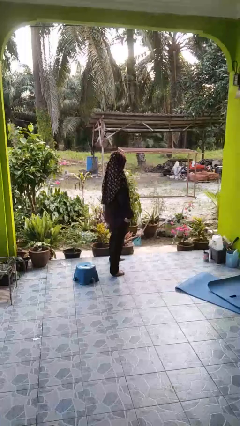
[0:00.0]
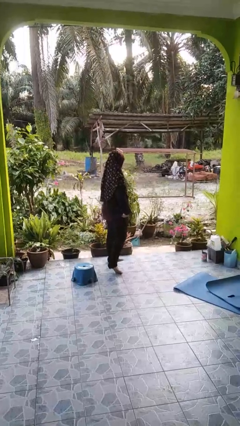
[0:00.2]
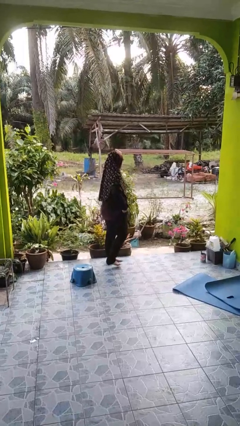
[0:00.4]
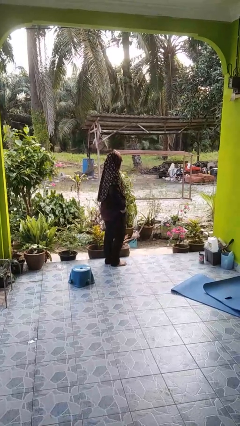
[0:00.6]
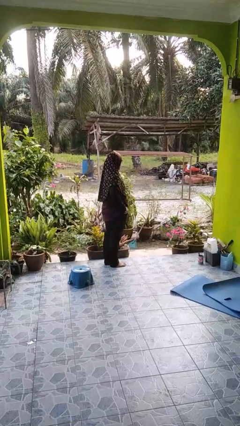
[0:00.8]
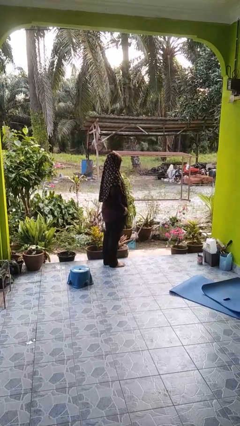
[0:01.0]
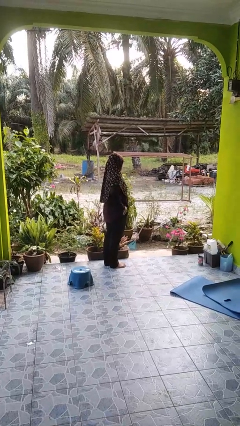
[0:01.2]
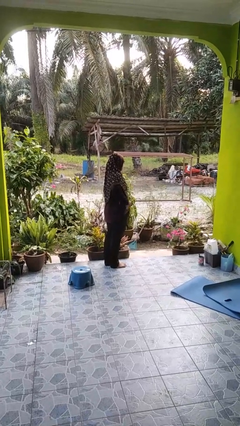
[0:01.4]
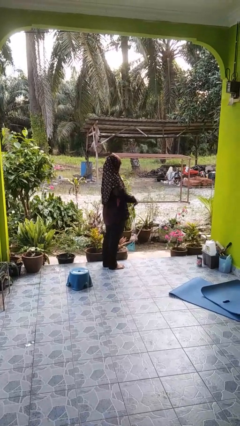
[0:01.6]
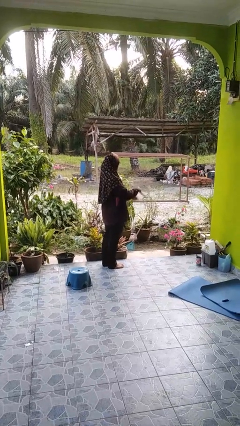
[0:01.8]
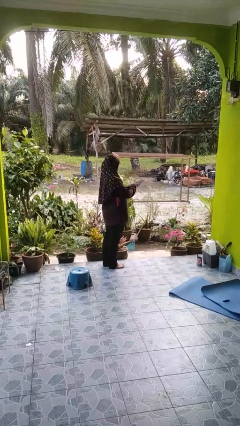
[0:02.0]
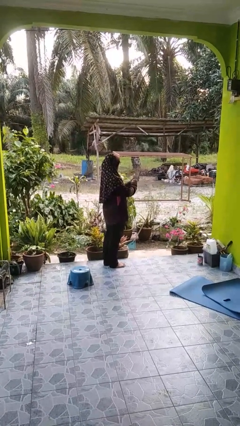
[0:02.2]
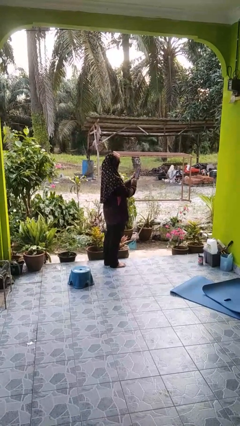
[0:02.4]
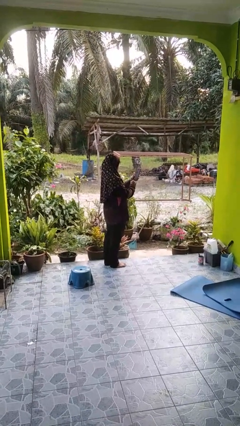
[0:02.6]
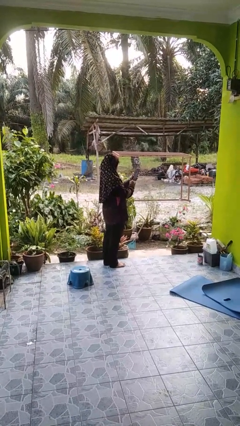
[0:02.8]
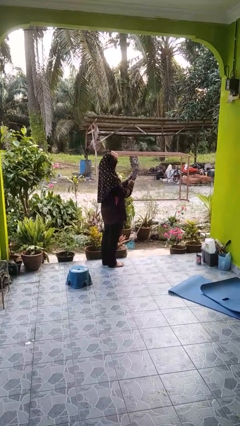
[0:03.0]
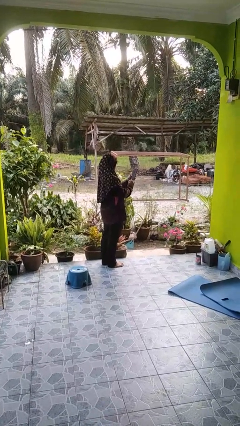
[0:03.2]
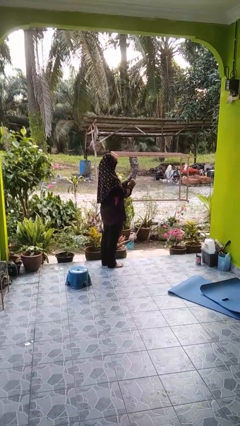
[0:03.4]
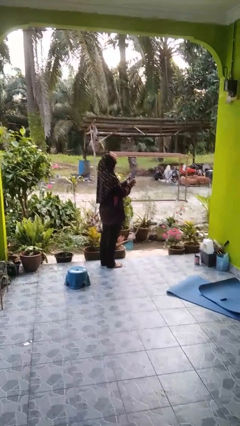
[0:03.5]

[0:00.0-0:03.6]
person takes phone from pocket

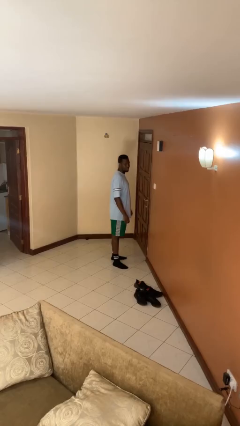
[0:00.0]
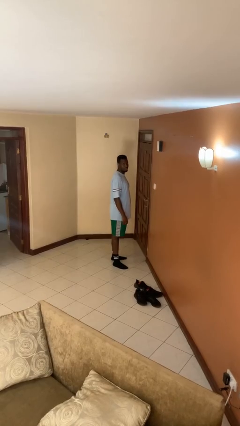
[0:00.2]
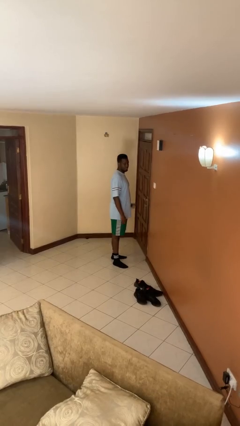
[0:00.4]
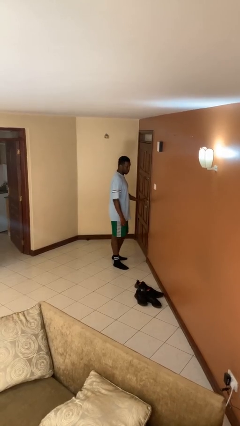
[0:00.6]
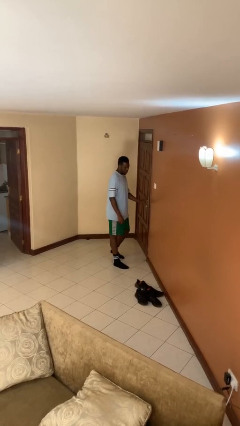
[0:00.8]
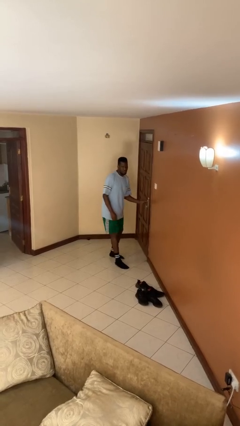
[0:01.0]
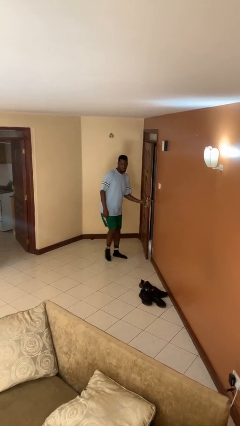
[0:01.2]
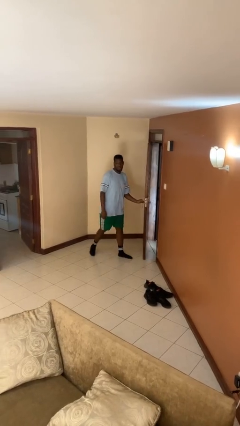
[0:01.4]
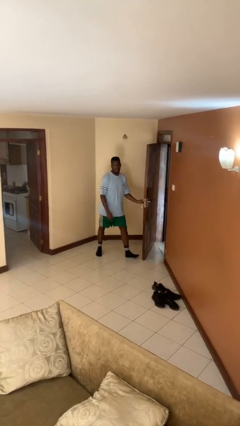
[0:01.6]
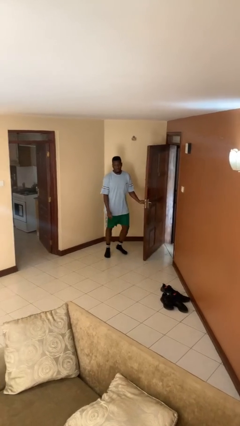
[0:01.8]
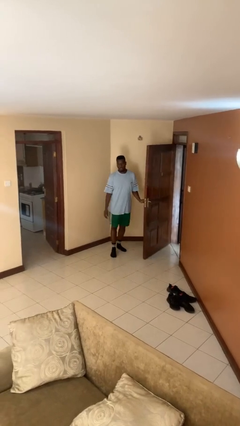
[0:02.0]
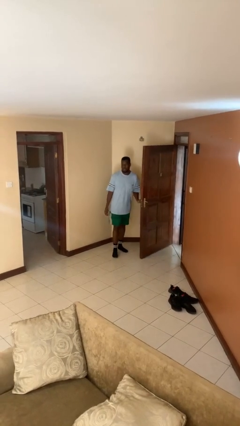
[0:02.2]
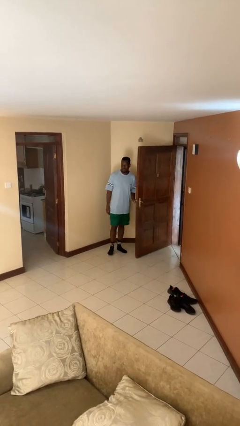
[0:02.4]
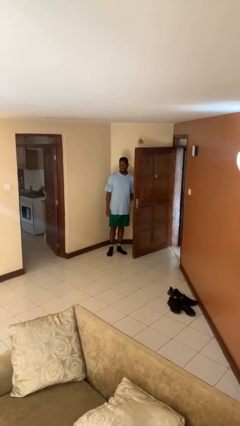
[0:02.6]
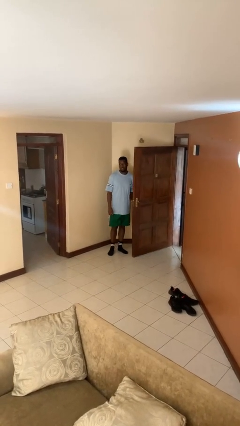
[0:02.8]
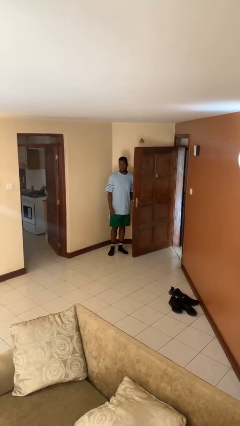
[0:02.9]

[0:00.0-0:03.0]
person opens facility door

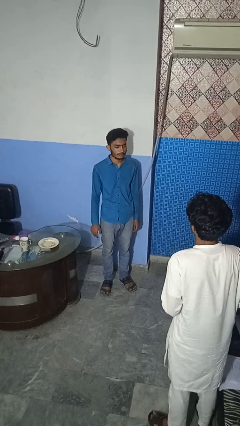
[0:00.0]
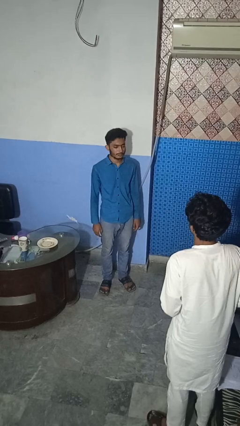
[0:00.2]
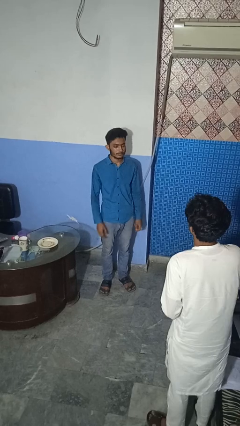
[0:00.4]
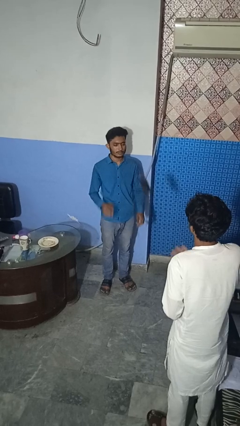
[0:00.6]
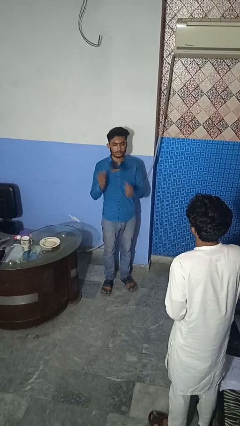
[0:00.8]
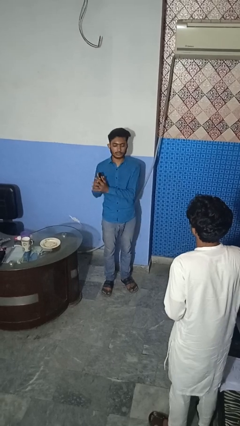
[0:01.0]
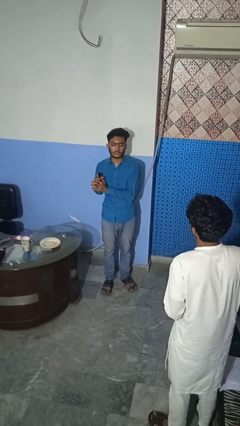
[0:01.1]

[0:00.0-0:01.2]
person catches object from person

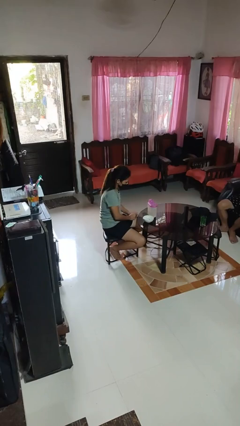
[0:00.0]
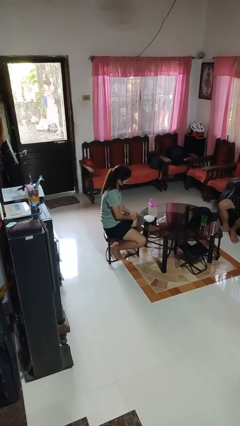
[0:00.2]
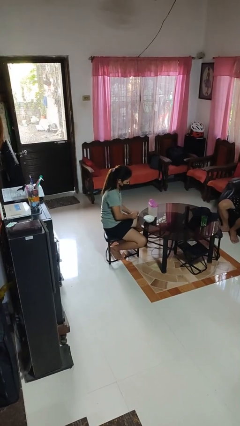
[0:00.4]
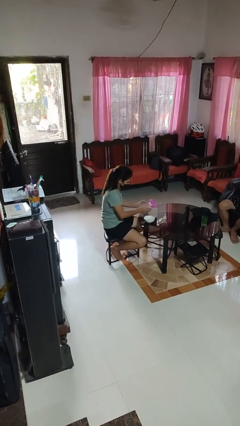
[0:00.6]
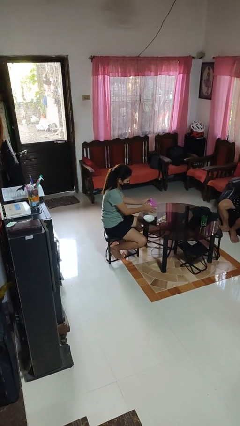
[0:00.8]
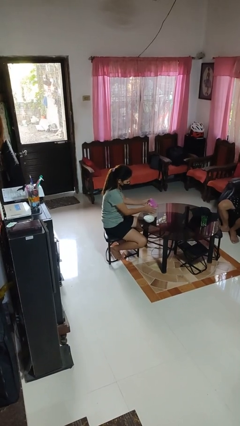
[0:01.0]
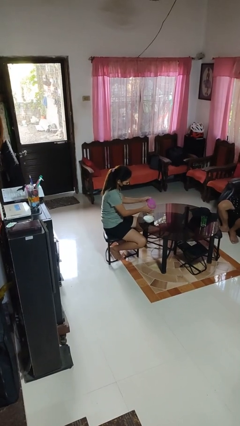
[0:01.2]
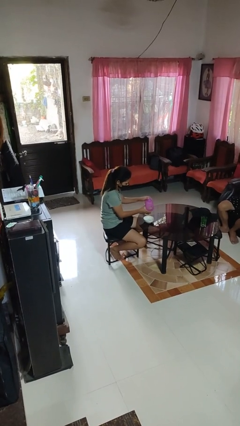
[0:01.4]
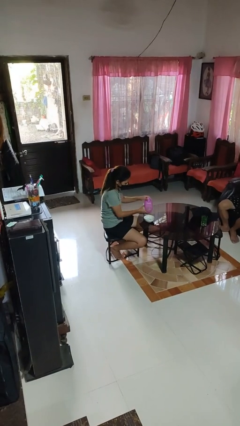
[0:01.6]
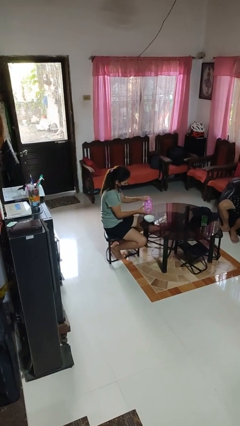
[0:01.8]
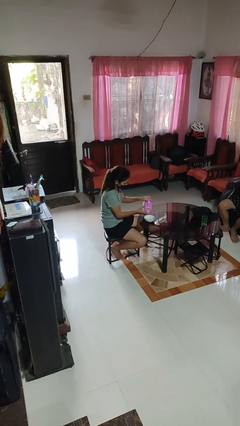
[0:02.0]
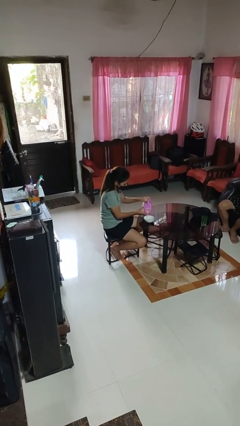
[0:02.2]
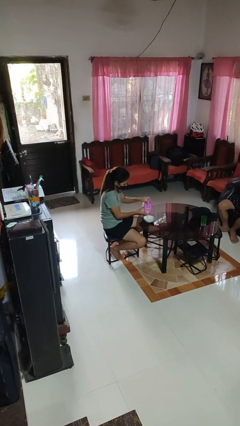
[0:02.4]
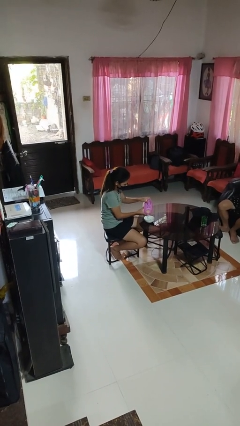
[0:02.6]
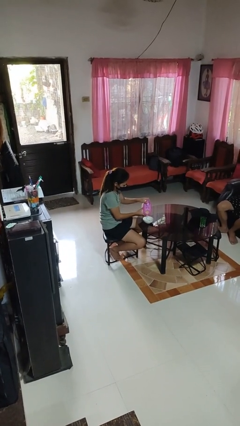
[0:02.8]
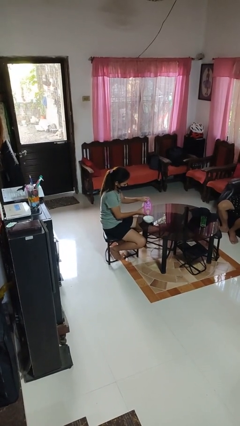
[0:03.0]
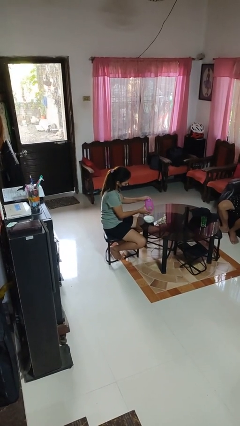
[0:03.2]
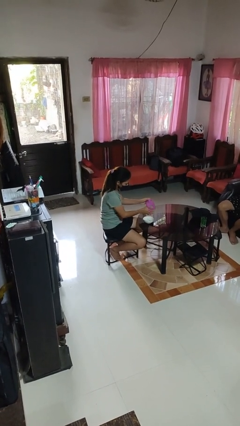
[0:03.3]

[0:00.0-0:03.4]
person pours into bowl

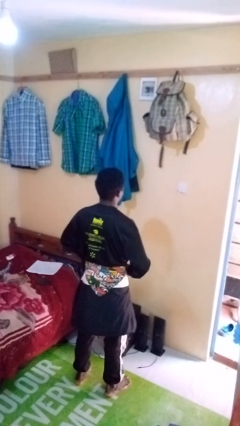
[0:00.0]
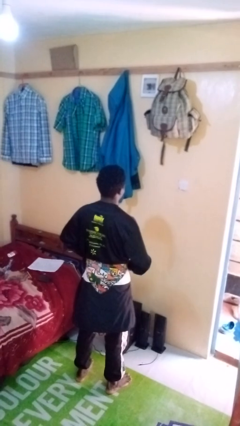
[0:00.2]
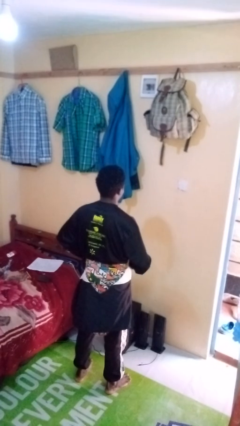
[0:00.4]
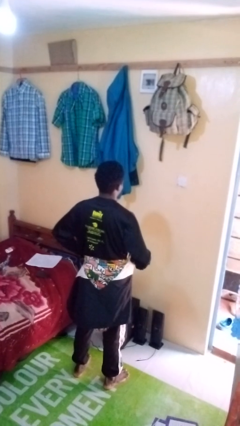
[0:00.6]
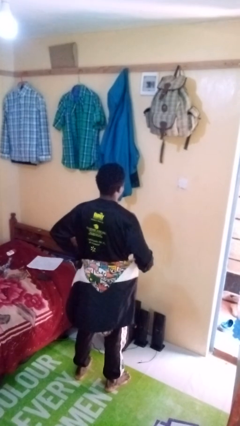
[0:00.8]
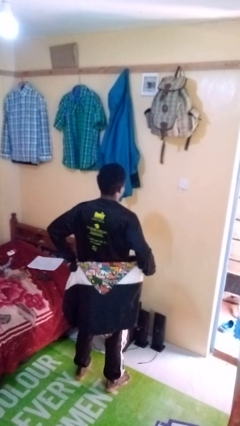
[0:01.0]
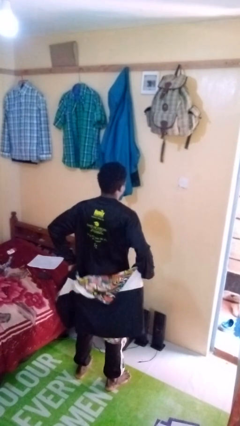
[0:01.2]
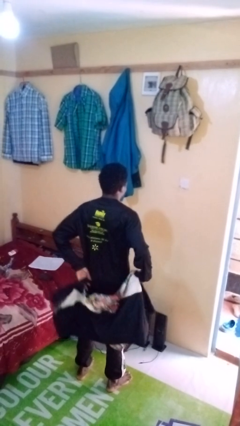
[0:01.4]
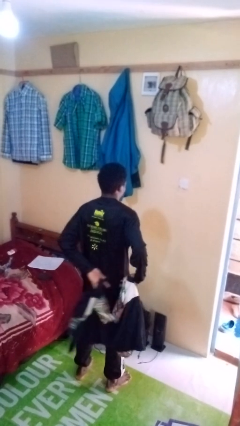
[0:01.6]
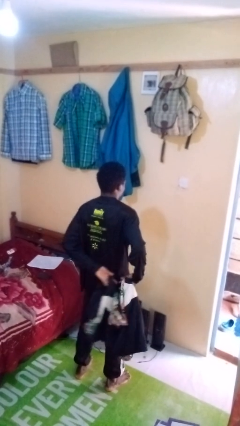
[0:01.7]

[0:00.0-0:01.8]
person unties jacket around waist

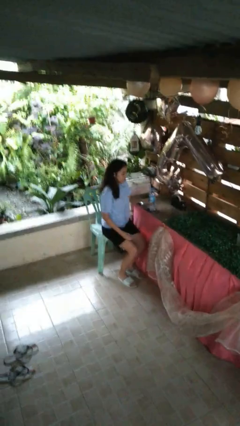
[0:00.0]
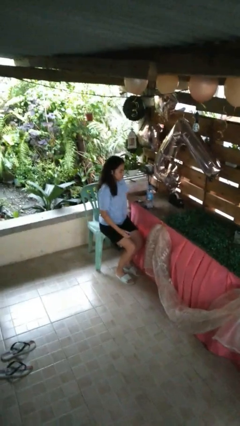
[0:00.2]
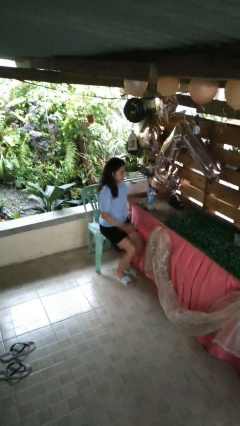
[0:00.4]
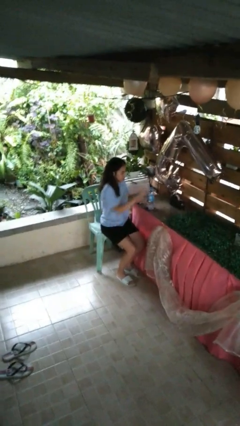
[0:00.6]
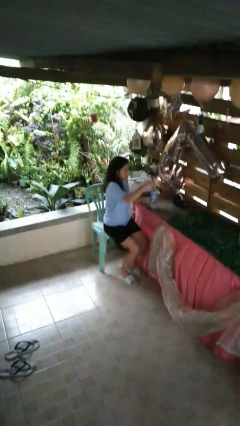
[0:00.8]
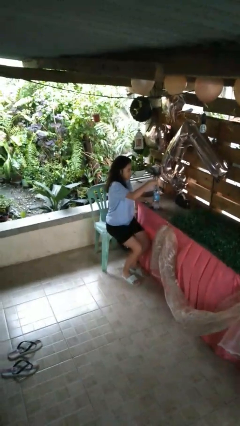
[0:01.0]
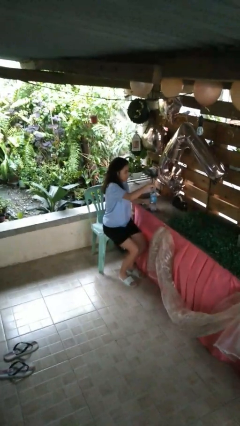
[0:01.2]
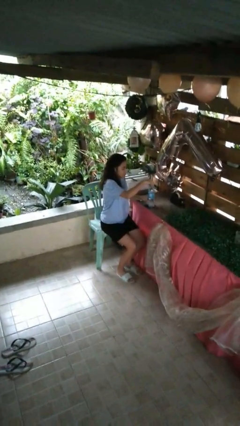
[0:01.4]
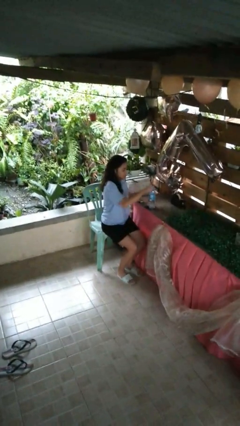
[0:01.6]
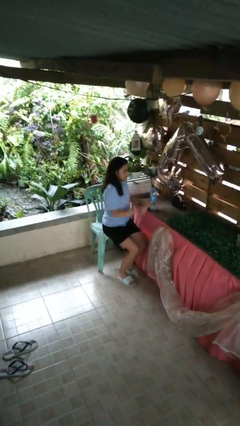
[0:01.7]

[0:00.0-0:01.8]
person screws lid to bottle

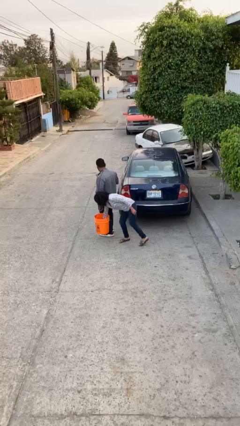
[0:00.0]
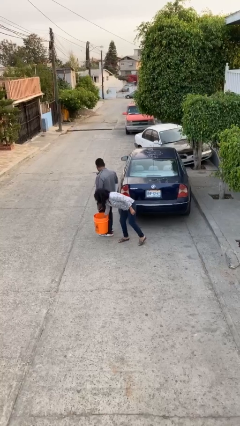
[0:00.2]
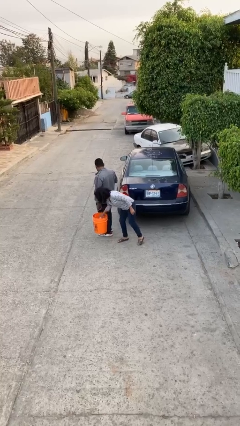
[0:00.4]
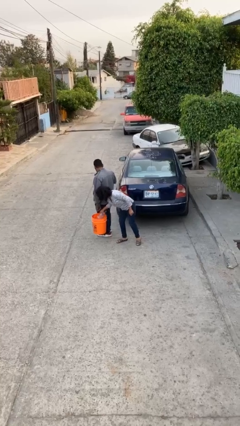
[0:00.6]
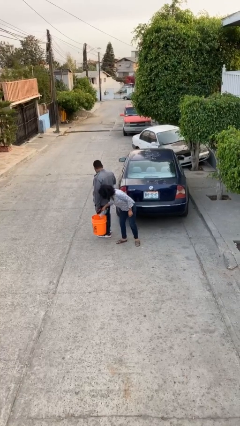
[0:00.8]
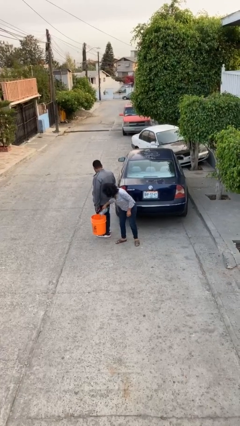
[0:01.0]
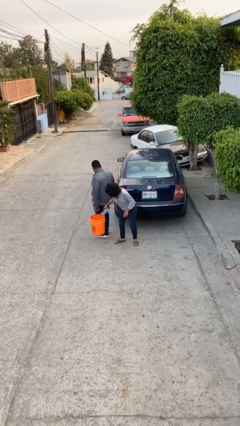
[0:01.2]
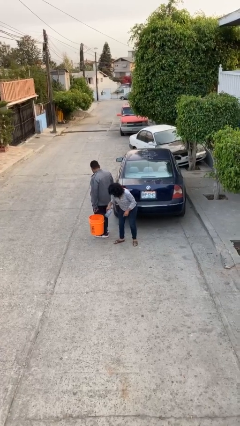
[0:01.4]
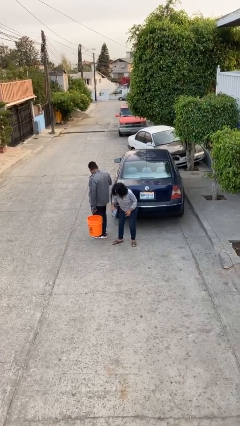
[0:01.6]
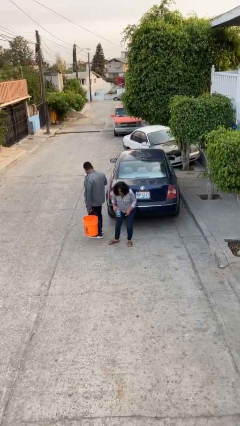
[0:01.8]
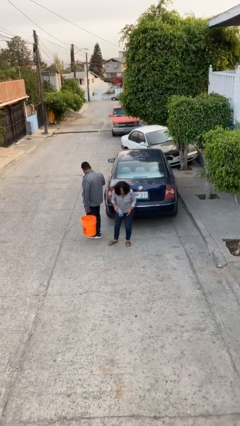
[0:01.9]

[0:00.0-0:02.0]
person steals object from person

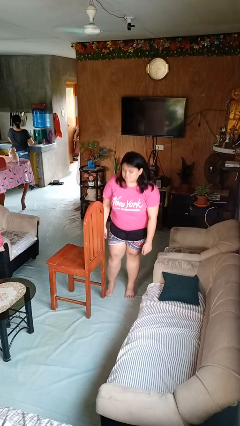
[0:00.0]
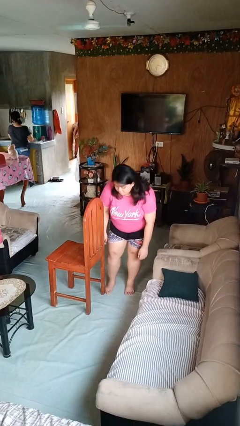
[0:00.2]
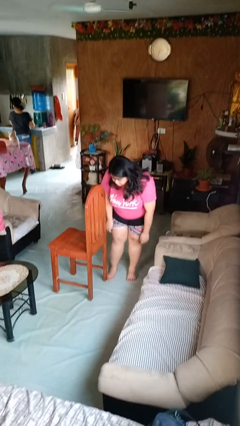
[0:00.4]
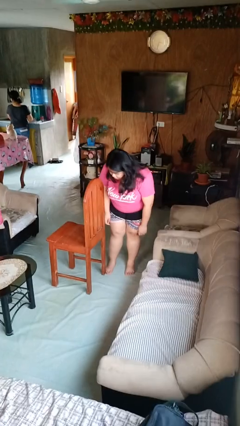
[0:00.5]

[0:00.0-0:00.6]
person stubs toe
